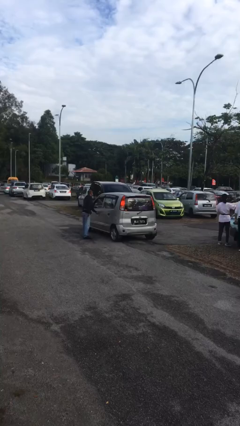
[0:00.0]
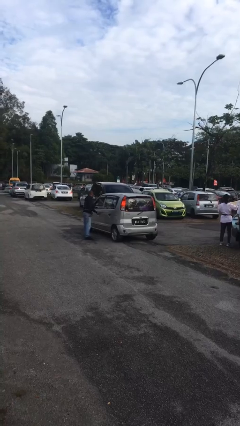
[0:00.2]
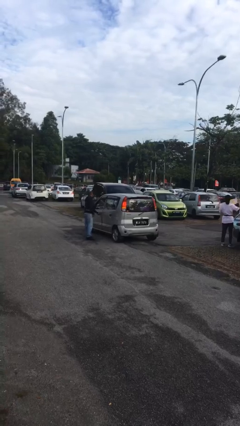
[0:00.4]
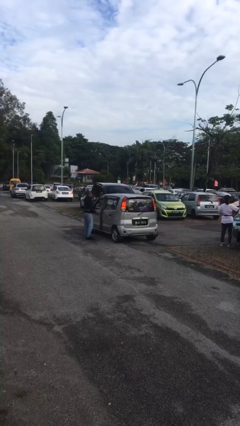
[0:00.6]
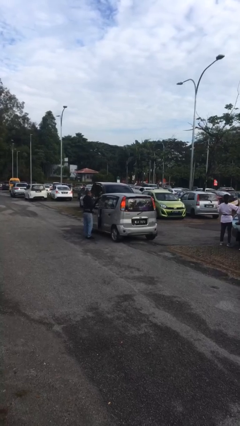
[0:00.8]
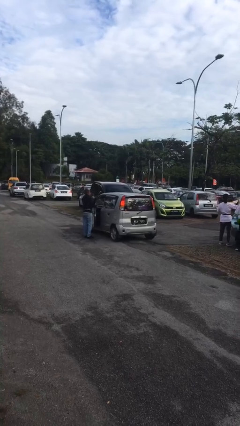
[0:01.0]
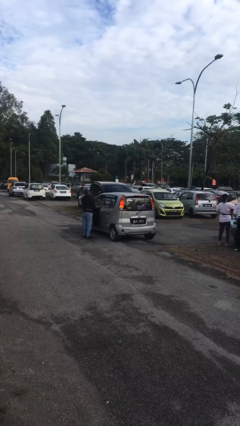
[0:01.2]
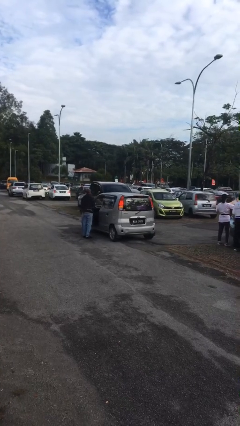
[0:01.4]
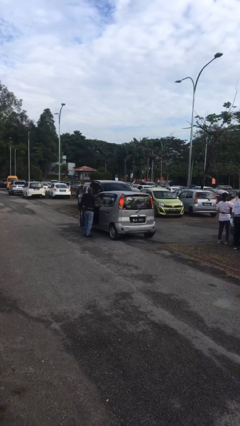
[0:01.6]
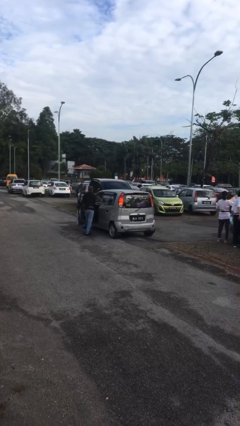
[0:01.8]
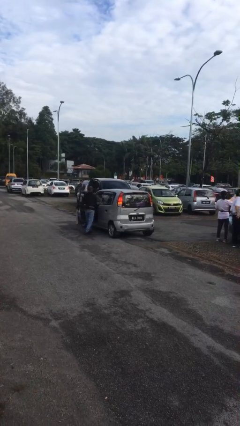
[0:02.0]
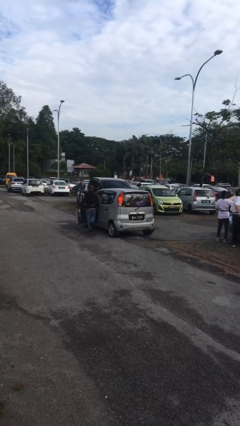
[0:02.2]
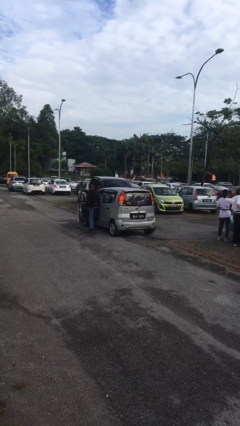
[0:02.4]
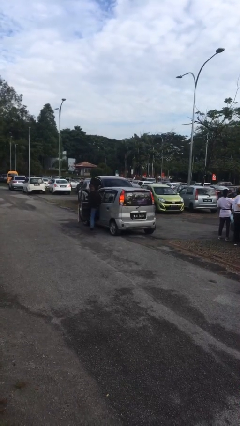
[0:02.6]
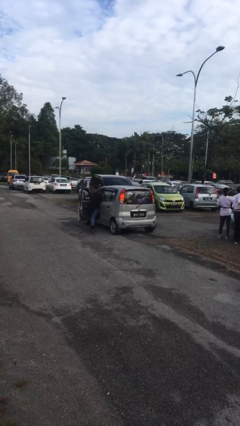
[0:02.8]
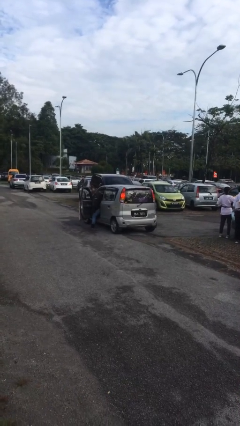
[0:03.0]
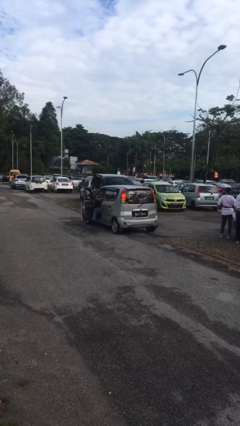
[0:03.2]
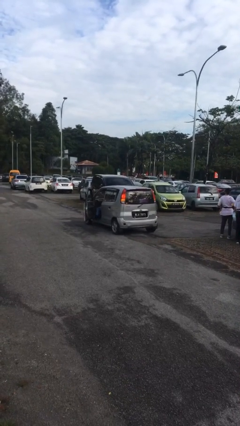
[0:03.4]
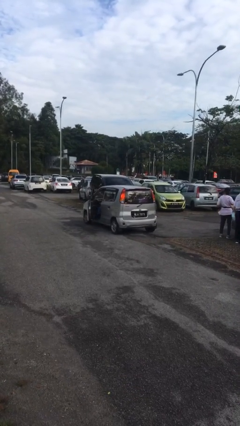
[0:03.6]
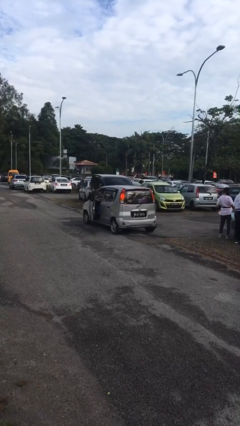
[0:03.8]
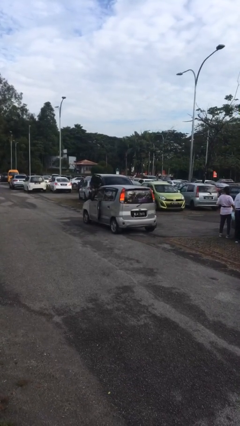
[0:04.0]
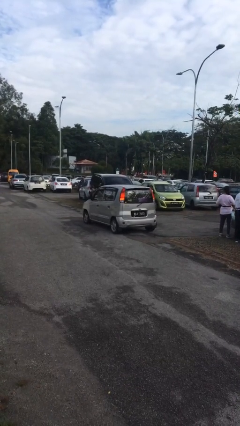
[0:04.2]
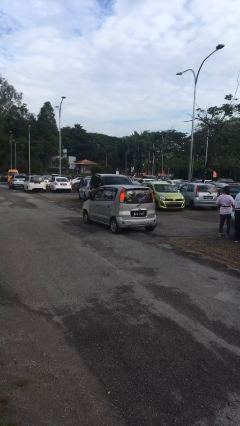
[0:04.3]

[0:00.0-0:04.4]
car picks up person

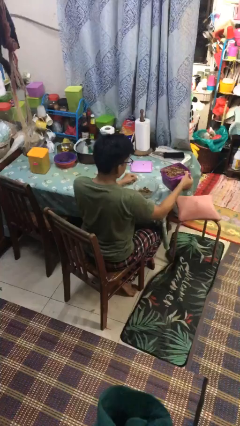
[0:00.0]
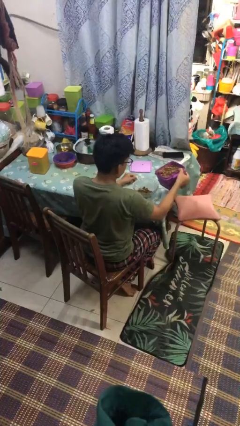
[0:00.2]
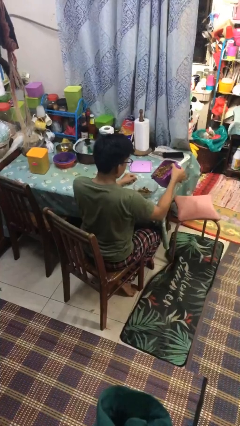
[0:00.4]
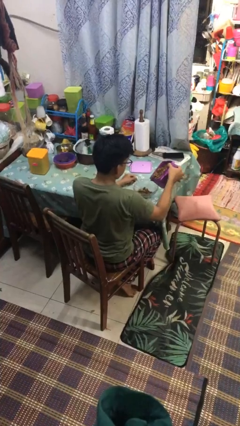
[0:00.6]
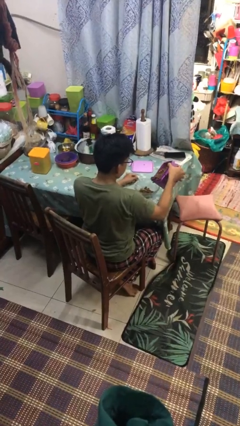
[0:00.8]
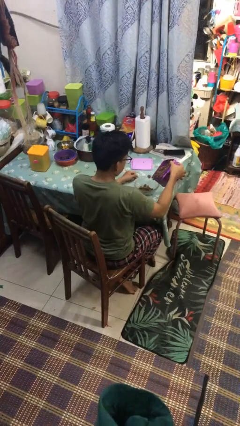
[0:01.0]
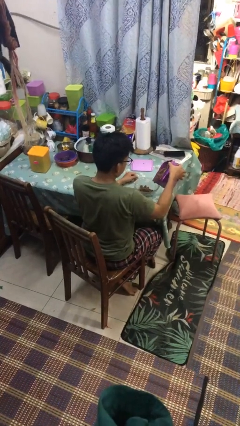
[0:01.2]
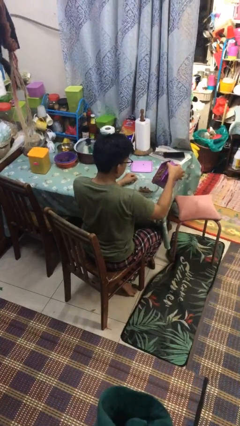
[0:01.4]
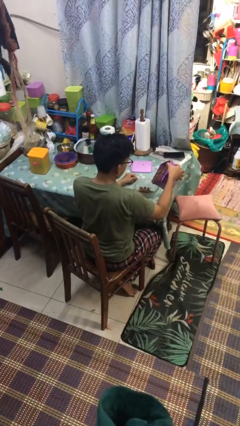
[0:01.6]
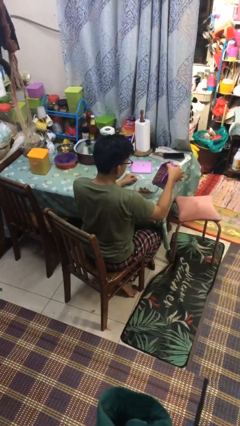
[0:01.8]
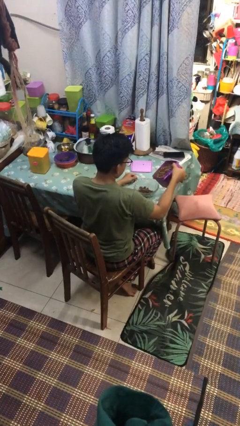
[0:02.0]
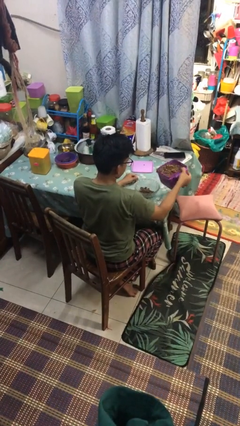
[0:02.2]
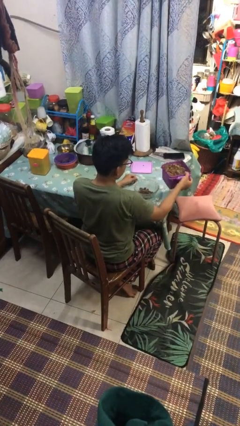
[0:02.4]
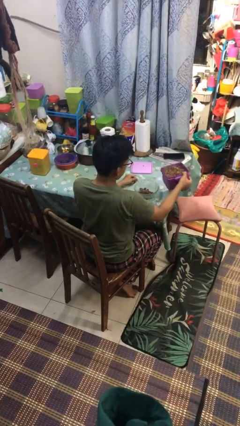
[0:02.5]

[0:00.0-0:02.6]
person pours into bowl

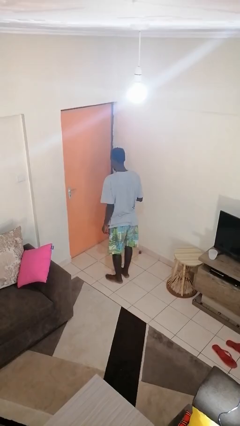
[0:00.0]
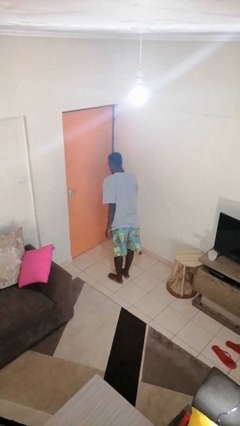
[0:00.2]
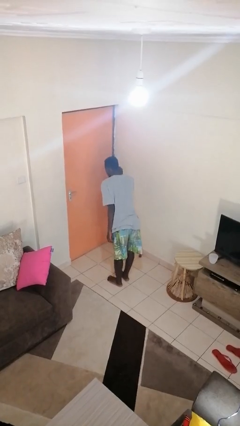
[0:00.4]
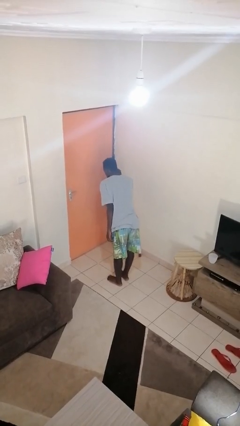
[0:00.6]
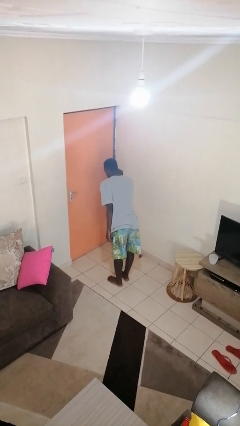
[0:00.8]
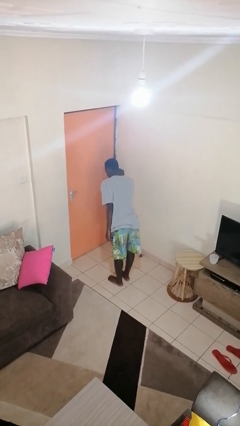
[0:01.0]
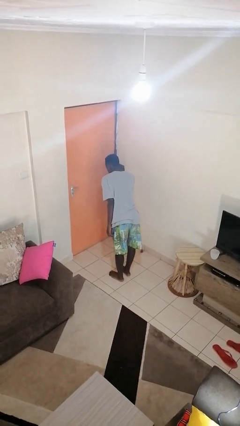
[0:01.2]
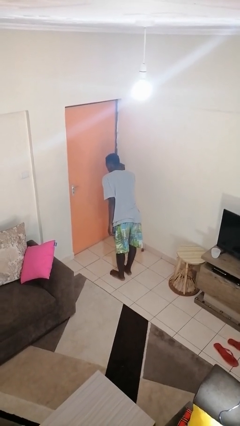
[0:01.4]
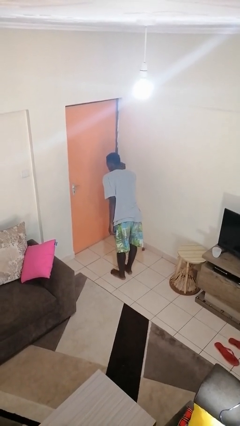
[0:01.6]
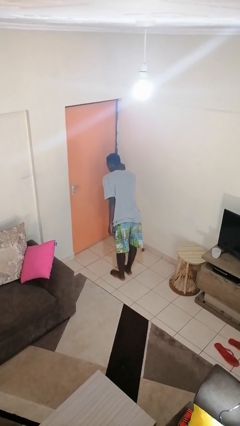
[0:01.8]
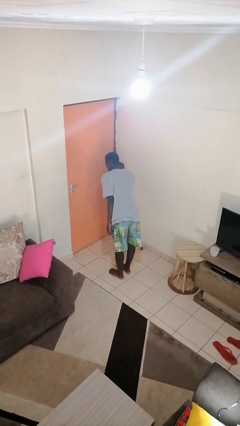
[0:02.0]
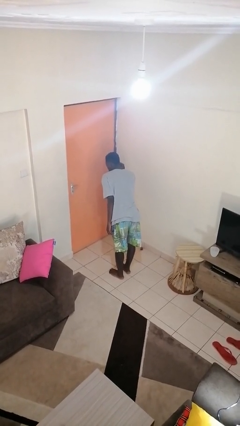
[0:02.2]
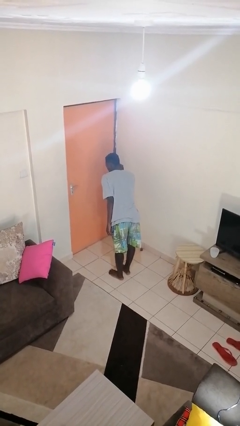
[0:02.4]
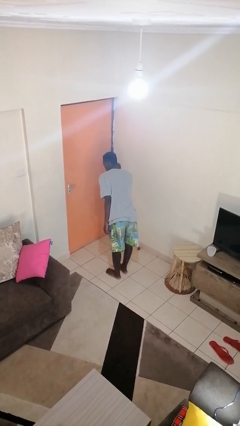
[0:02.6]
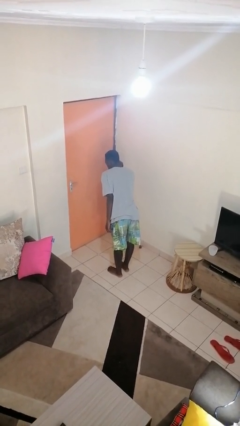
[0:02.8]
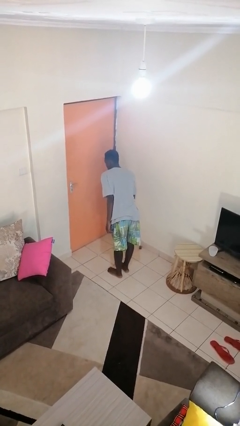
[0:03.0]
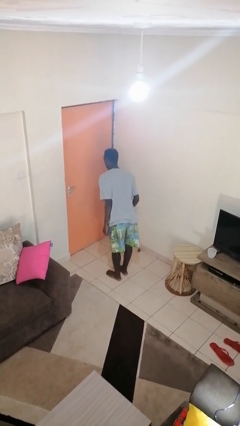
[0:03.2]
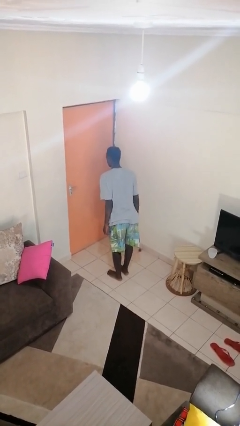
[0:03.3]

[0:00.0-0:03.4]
person gestures listen closely

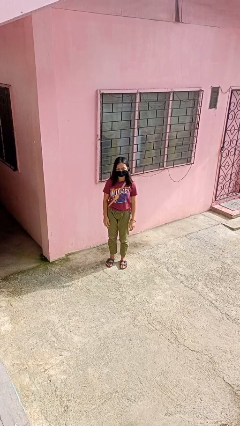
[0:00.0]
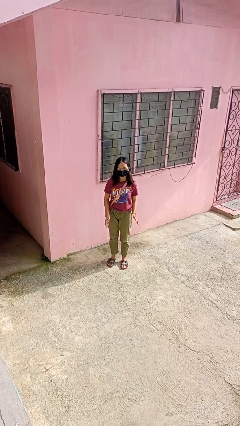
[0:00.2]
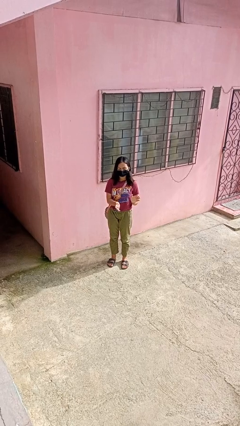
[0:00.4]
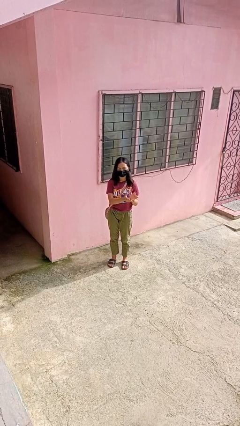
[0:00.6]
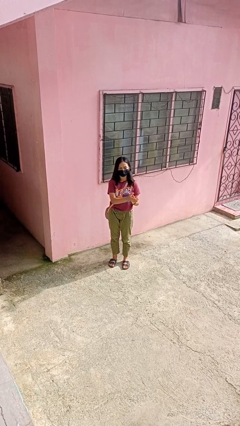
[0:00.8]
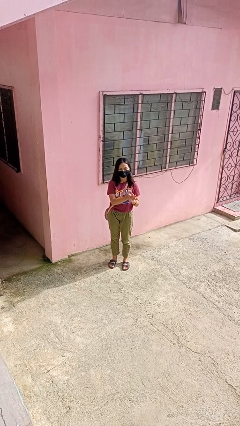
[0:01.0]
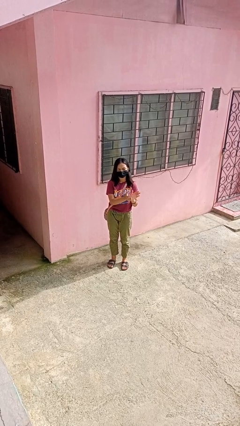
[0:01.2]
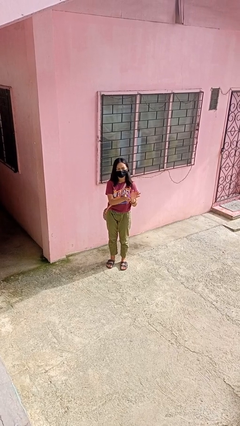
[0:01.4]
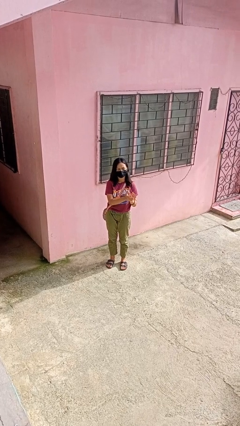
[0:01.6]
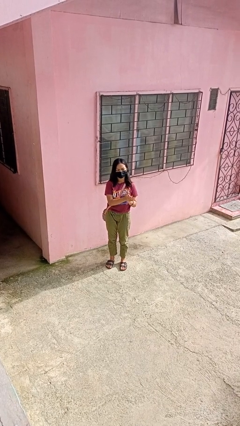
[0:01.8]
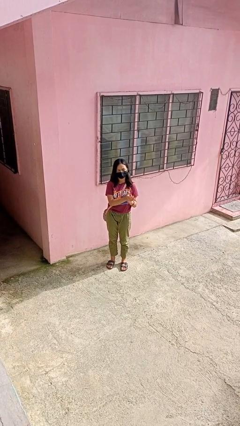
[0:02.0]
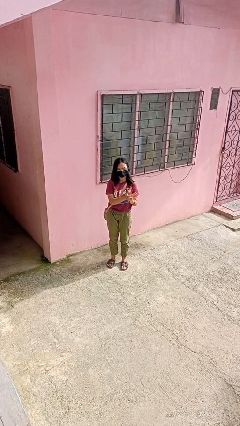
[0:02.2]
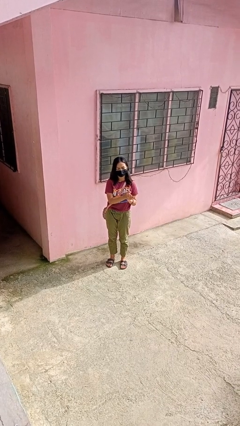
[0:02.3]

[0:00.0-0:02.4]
person claps hands

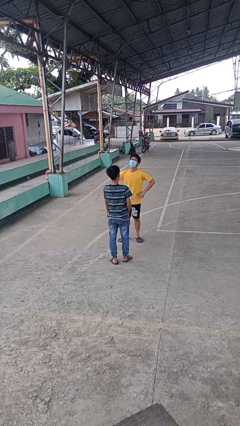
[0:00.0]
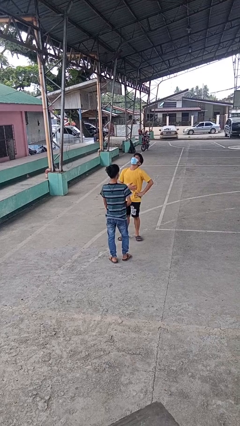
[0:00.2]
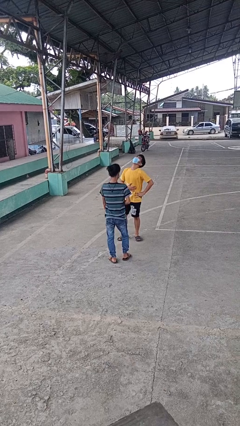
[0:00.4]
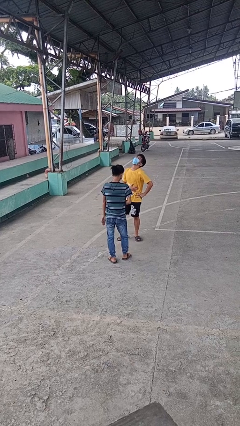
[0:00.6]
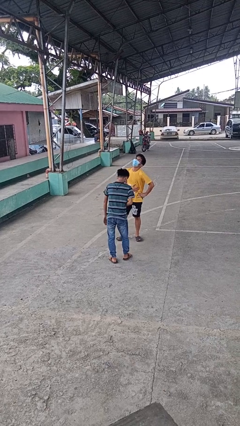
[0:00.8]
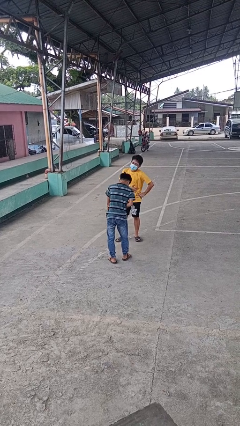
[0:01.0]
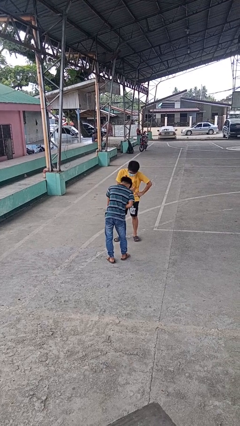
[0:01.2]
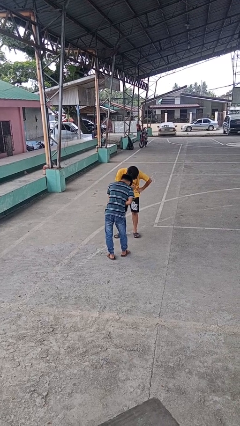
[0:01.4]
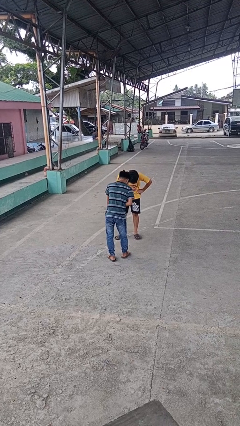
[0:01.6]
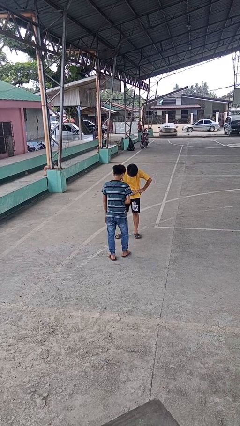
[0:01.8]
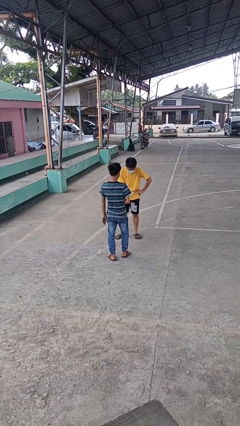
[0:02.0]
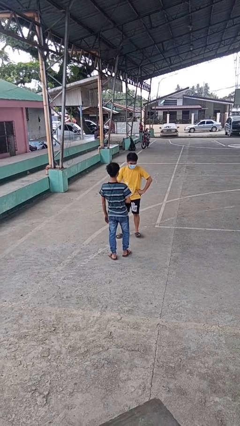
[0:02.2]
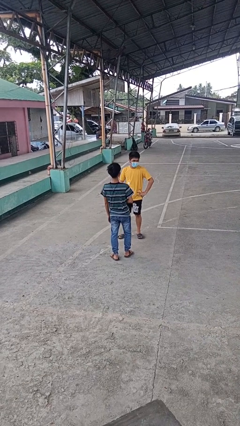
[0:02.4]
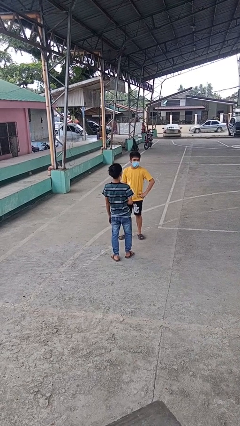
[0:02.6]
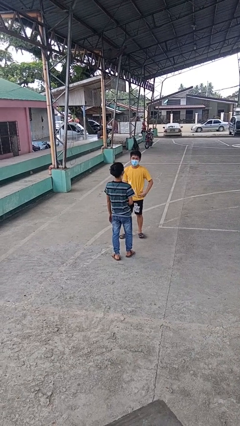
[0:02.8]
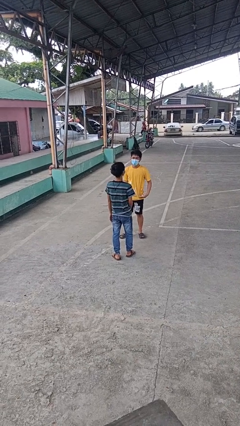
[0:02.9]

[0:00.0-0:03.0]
person laughs with person

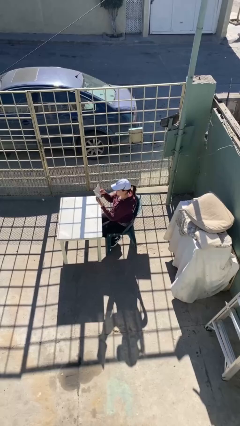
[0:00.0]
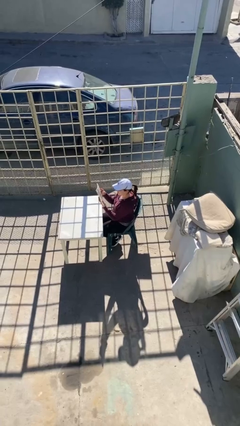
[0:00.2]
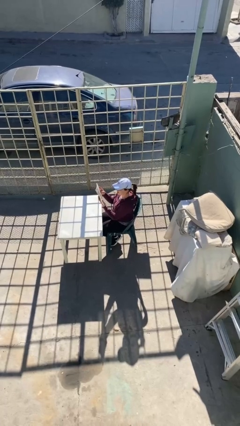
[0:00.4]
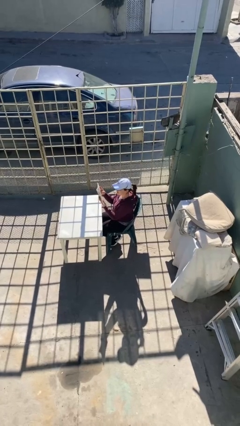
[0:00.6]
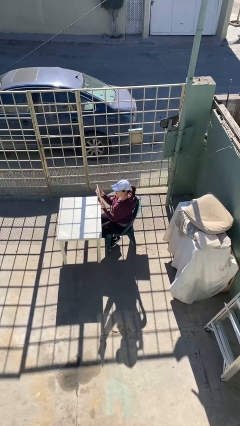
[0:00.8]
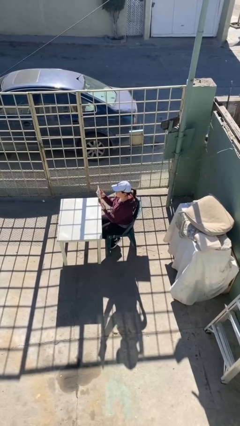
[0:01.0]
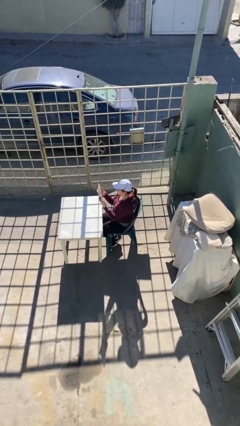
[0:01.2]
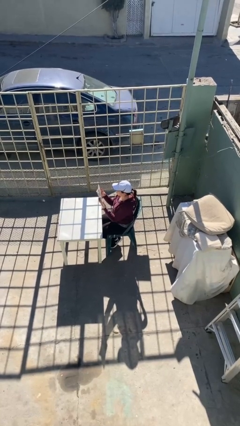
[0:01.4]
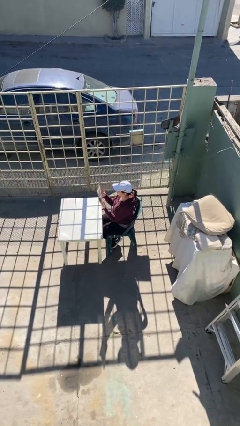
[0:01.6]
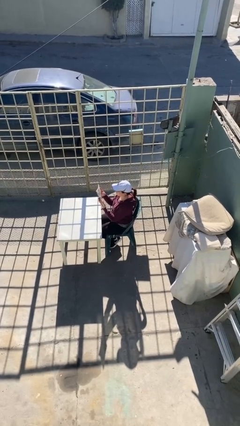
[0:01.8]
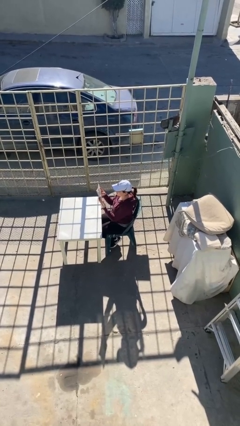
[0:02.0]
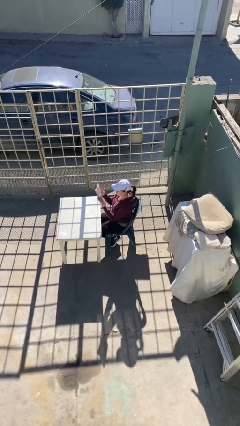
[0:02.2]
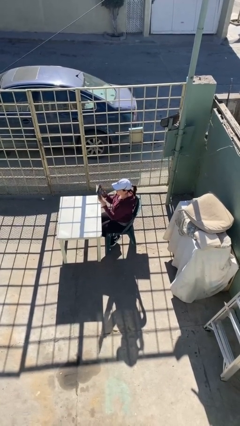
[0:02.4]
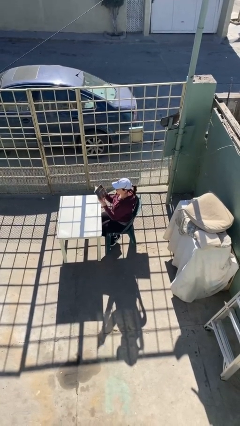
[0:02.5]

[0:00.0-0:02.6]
person reads document
